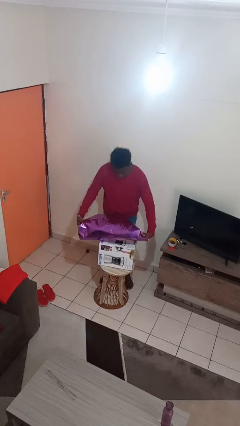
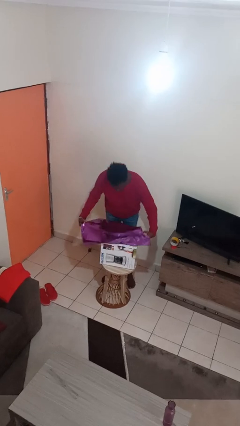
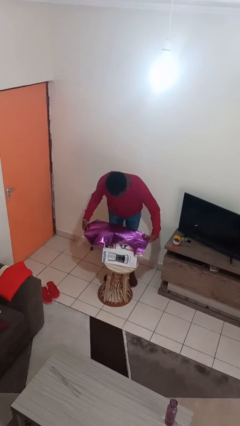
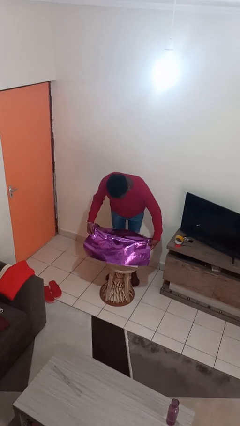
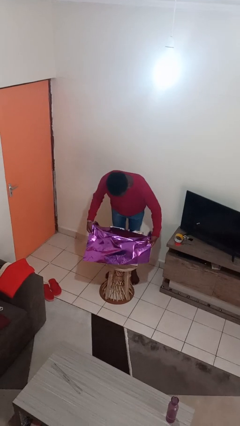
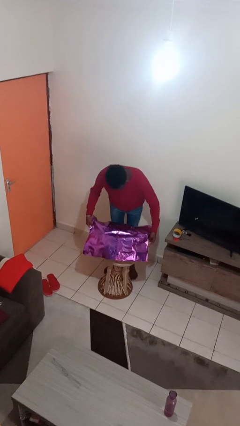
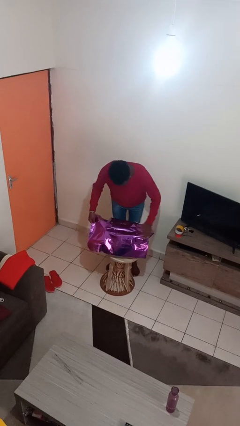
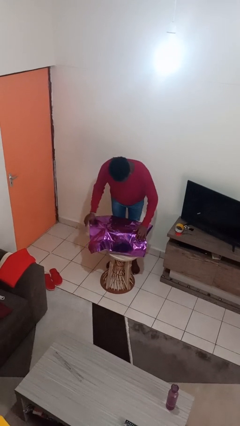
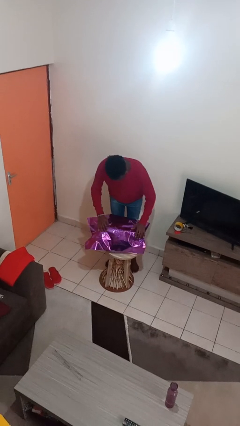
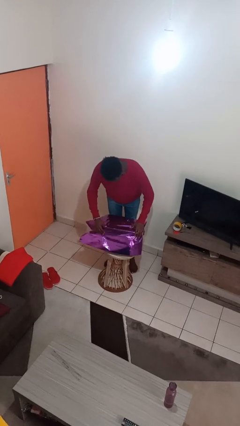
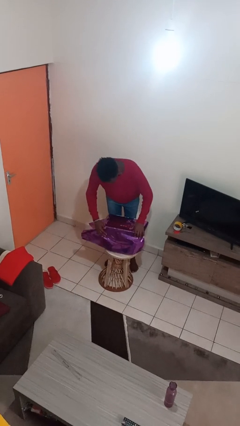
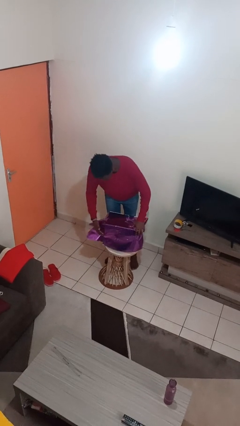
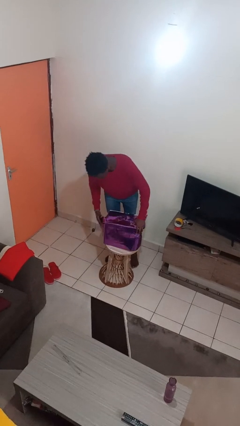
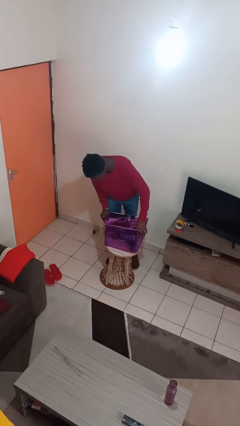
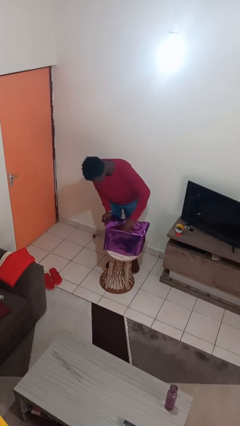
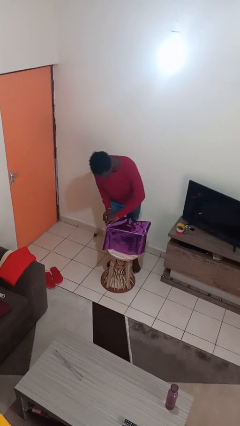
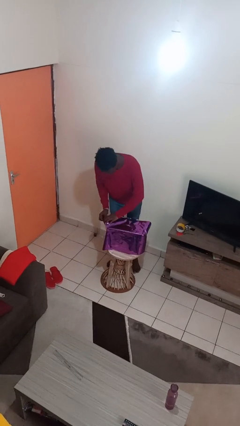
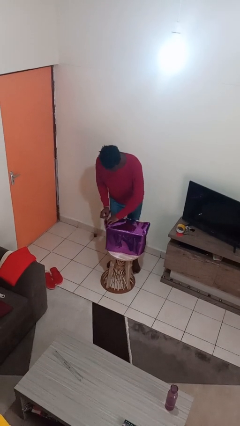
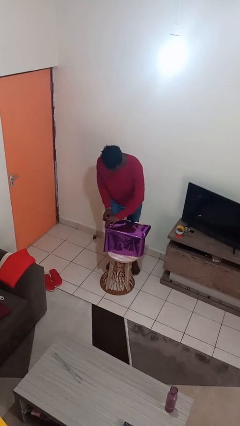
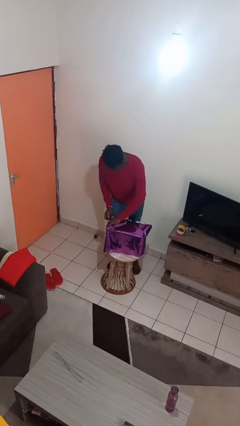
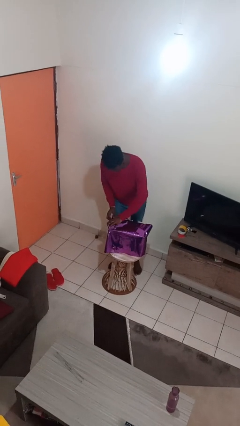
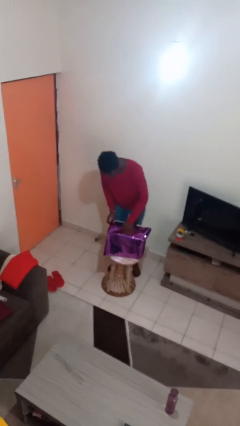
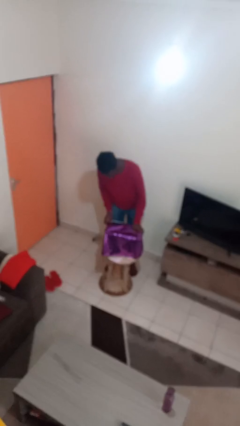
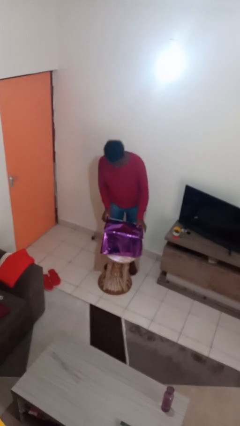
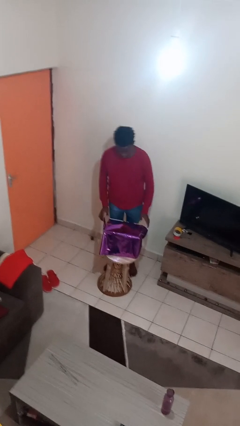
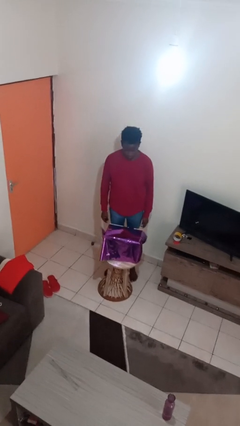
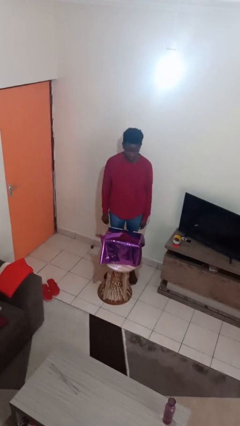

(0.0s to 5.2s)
person wraps box

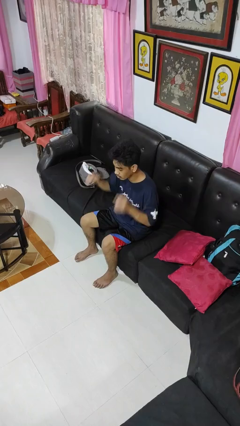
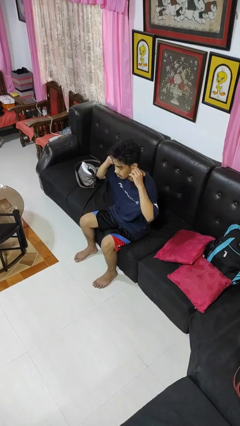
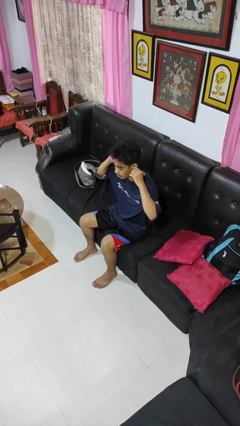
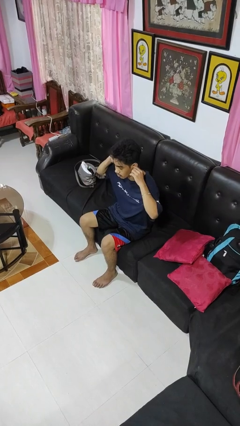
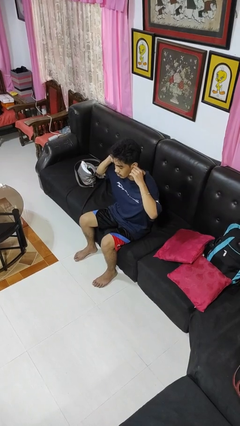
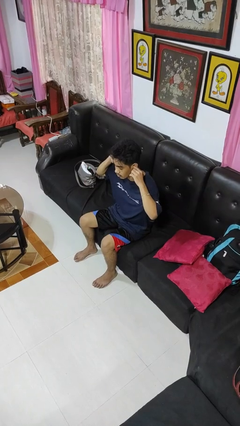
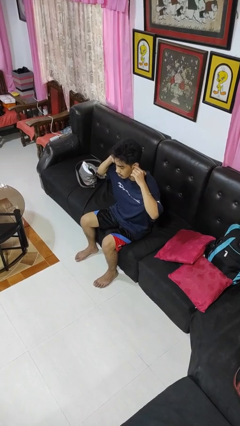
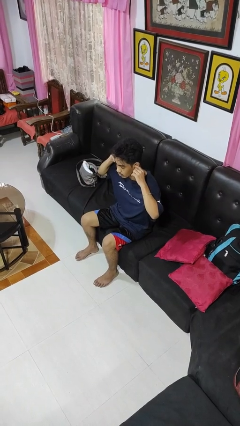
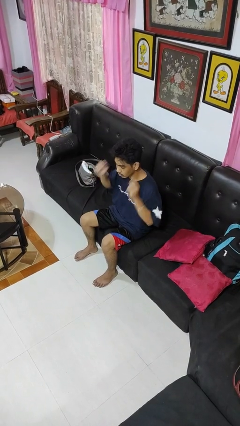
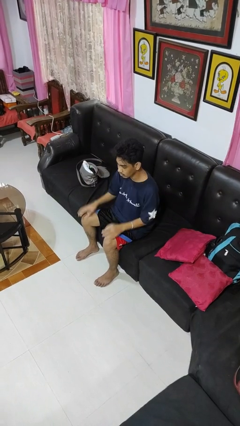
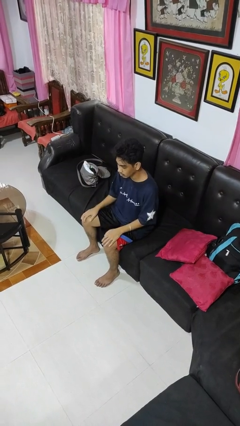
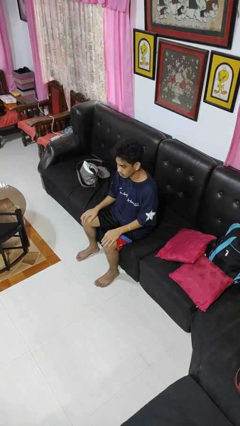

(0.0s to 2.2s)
person puts fingers in ear

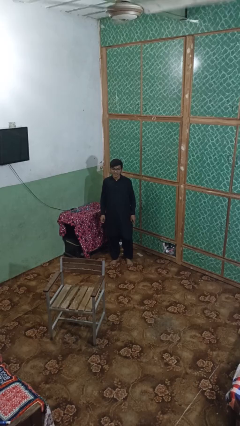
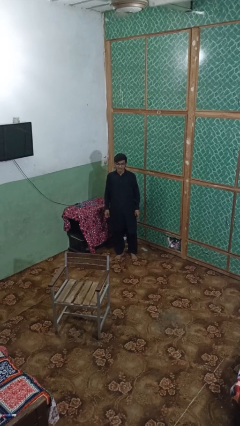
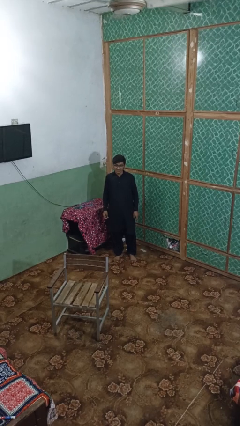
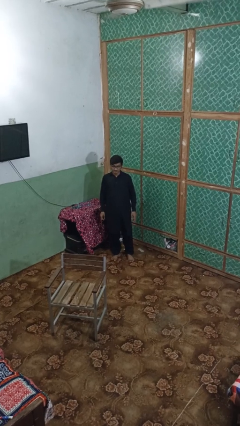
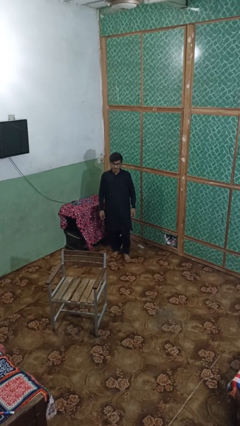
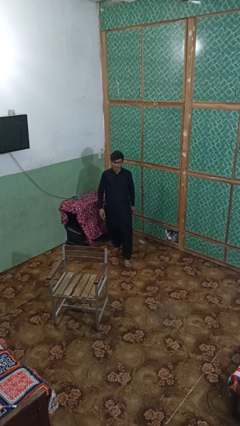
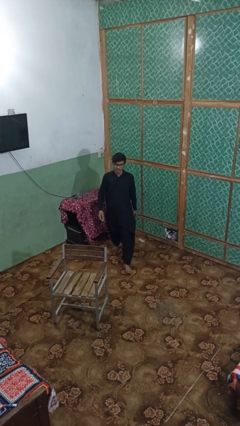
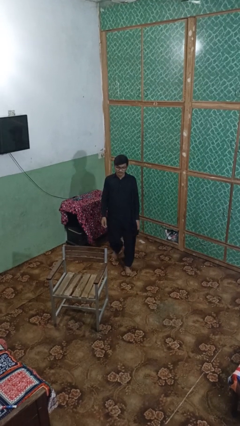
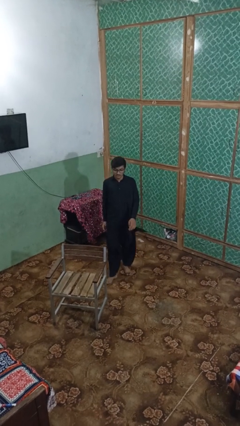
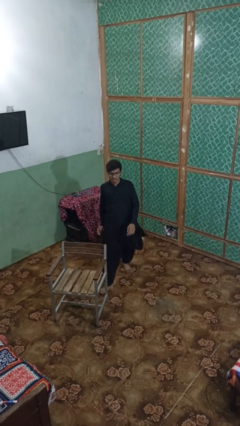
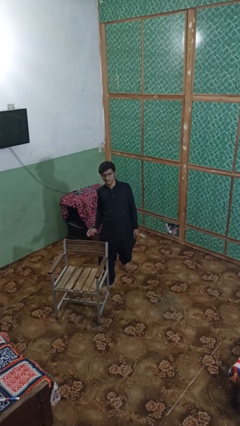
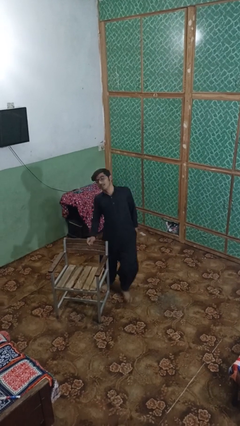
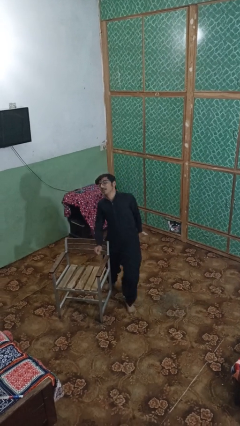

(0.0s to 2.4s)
person trips on object on floor

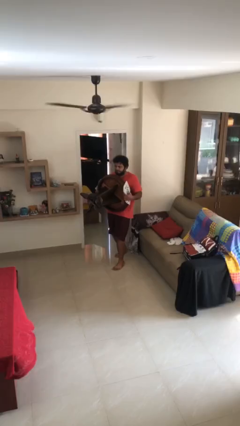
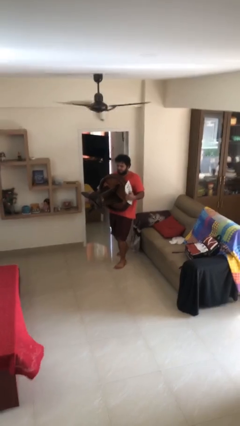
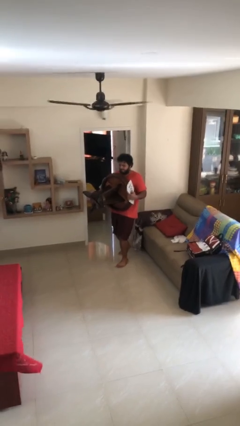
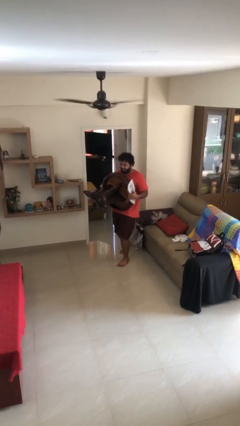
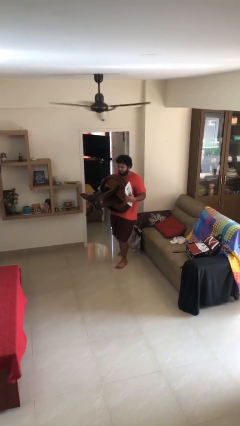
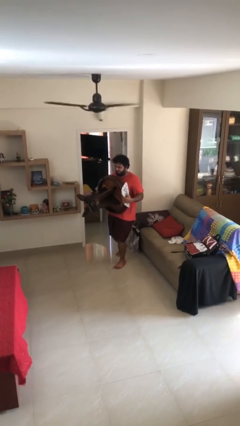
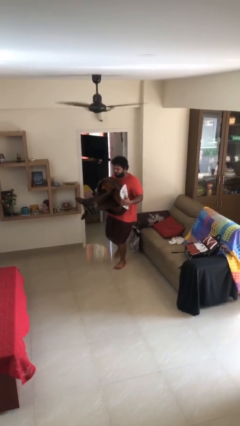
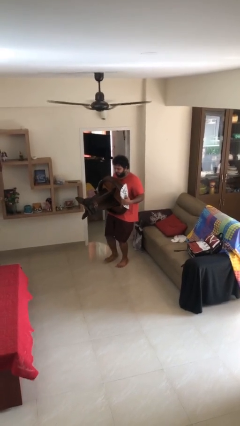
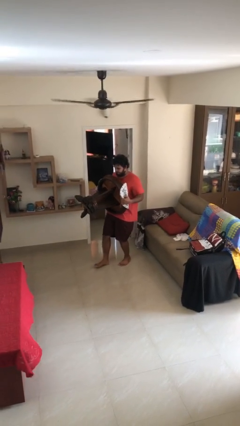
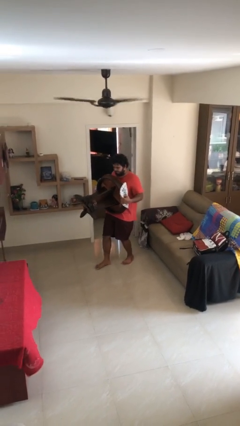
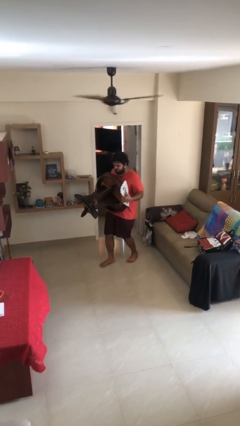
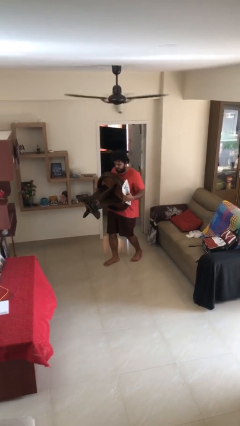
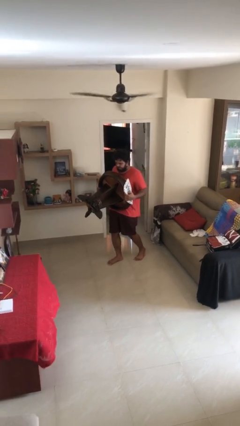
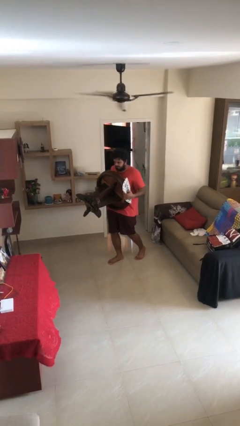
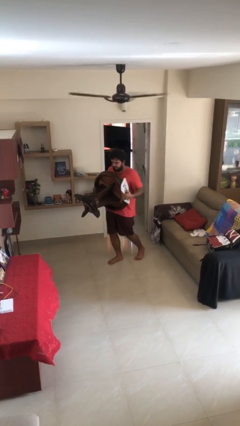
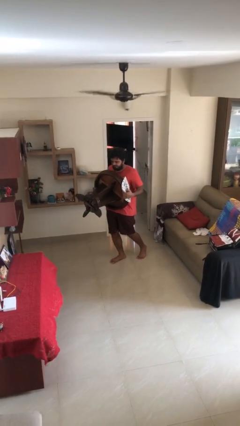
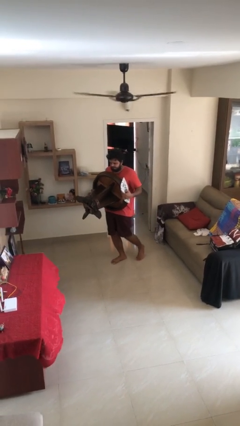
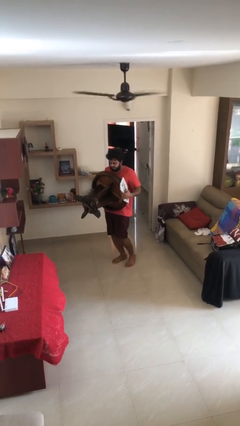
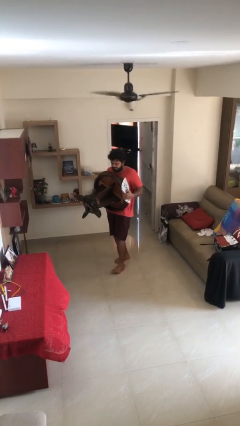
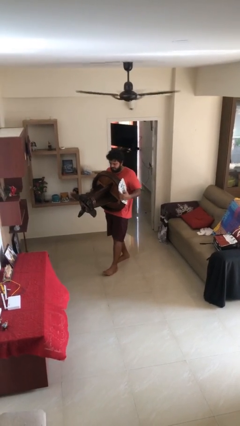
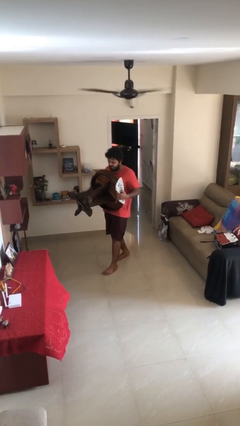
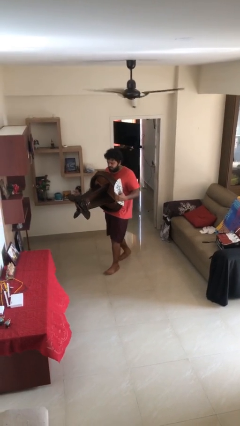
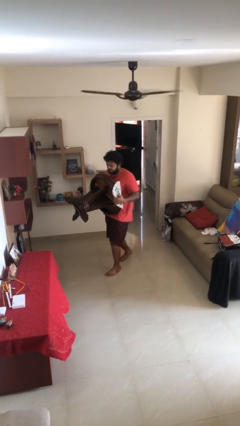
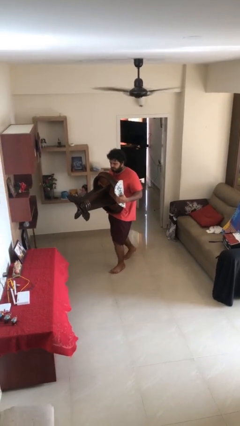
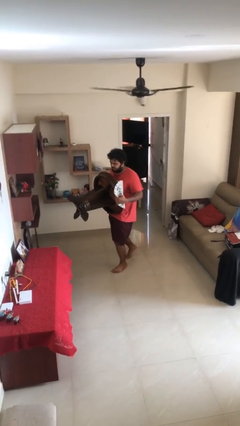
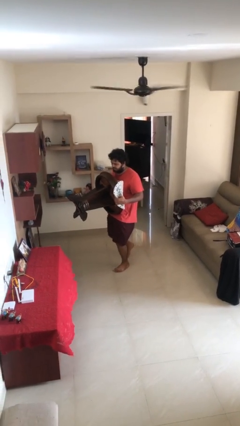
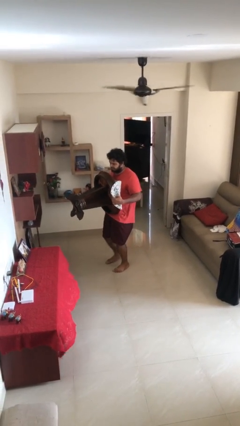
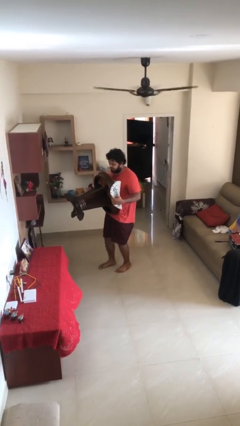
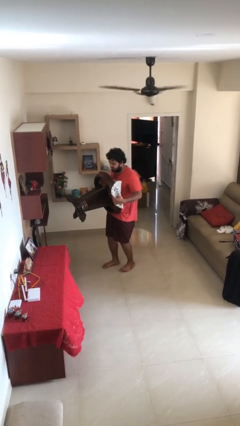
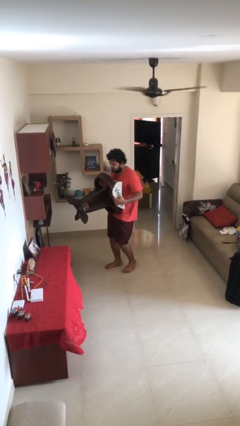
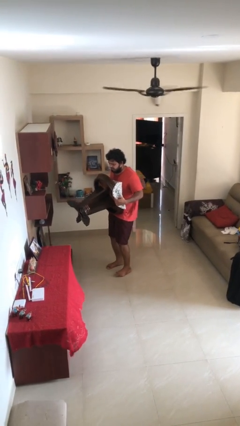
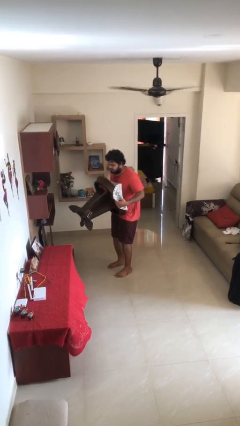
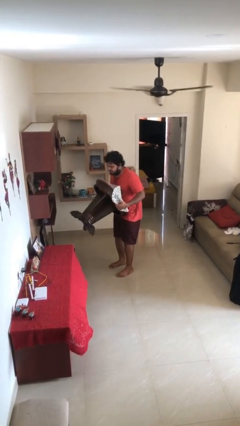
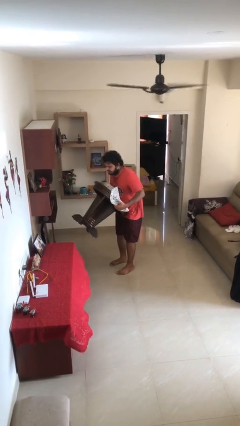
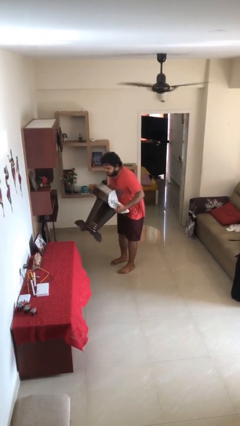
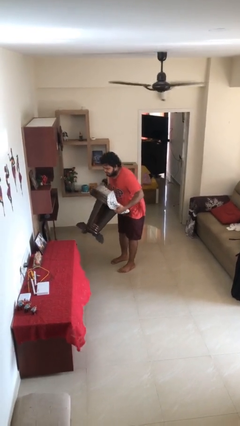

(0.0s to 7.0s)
person carries heavy object

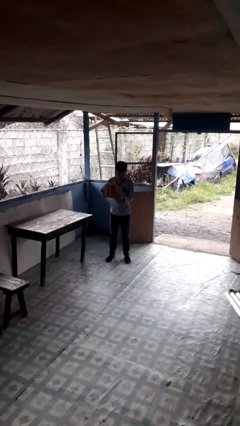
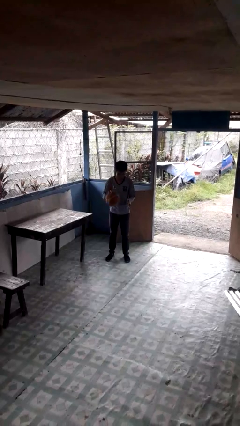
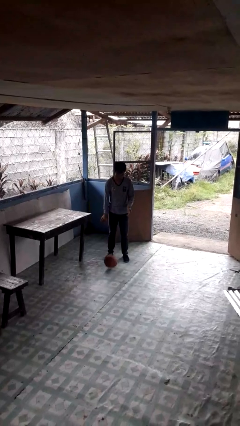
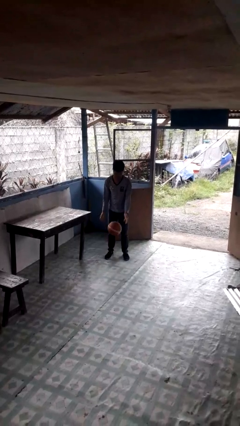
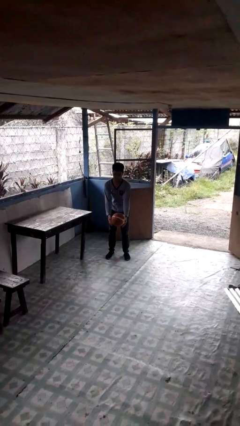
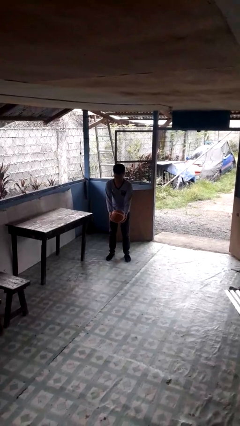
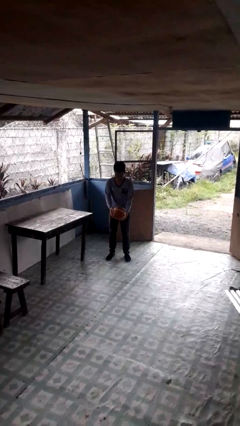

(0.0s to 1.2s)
person bounces ball on floor
